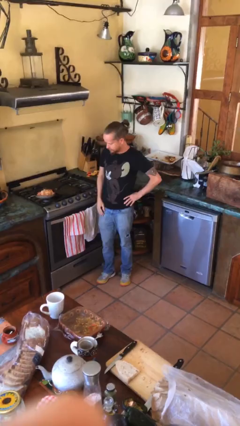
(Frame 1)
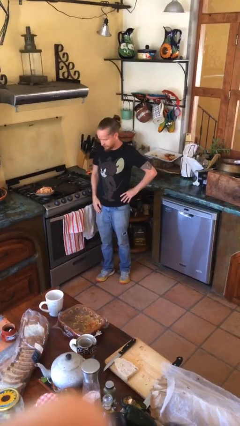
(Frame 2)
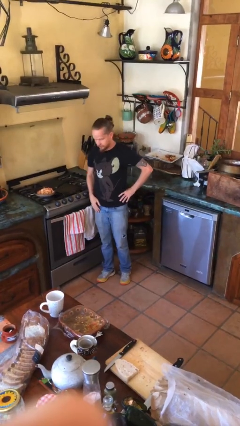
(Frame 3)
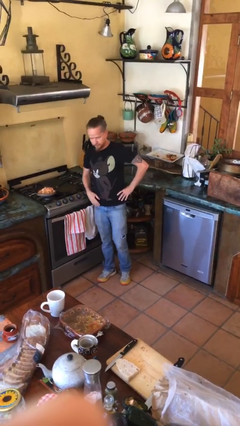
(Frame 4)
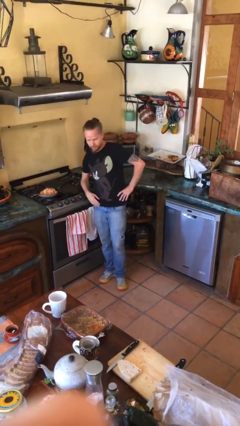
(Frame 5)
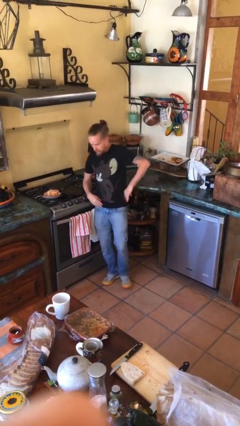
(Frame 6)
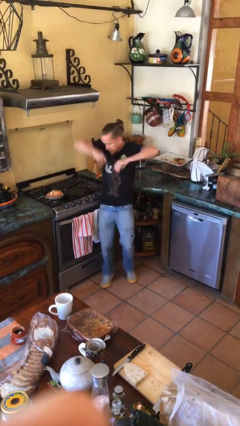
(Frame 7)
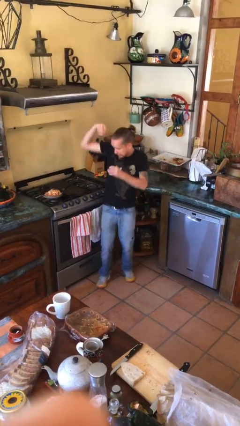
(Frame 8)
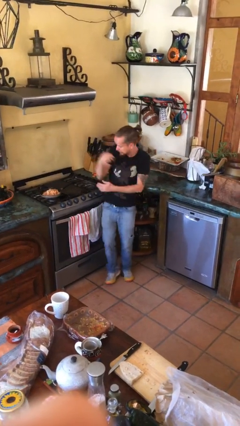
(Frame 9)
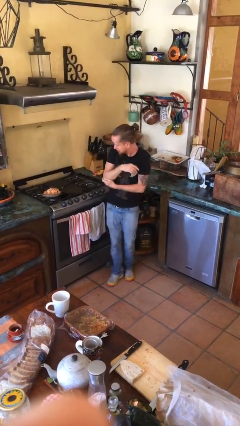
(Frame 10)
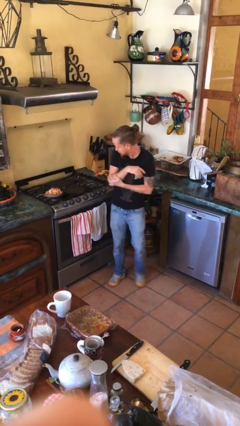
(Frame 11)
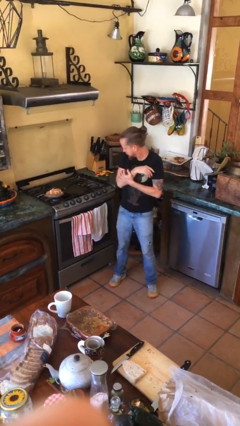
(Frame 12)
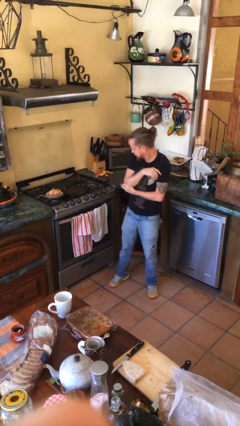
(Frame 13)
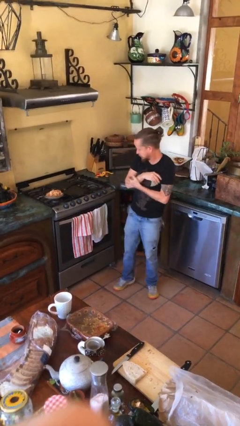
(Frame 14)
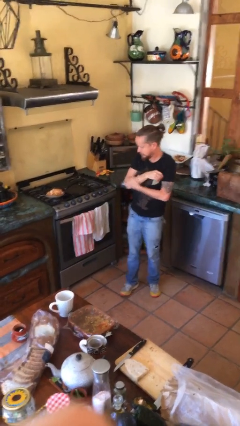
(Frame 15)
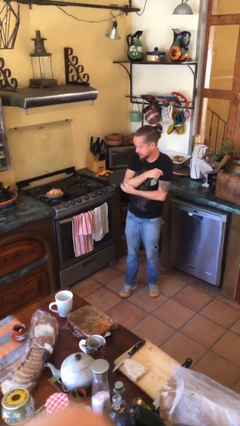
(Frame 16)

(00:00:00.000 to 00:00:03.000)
person burns hand

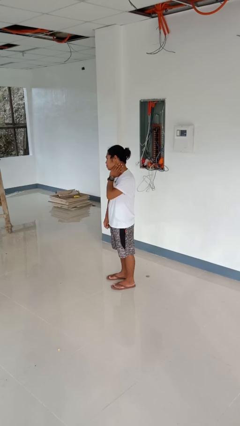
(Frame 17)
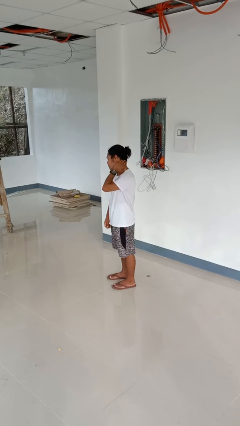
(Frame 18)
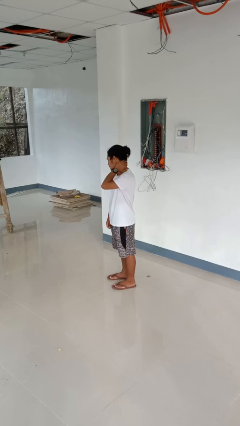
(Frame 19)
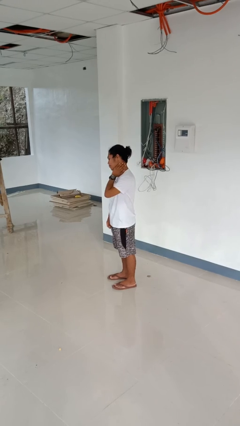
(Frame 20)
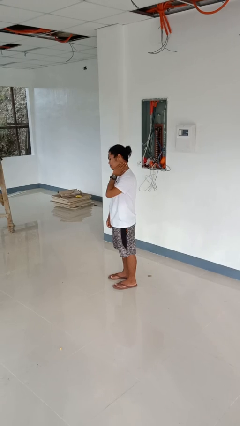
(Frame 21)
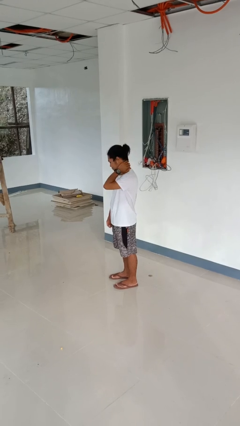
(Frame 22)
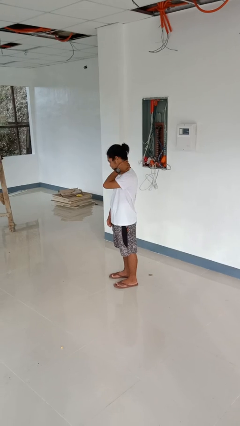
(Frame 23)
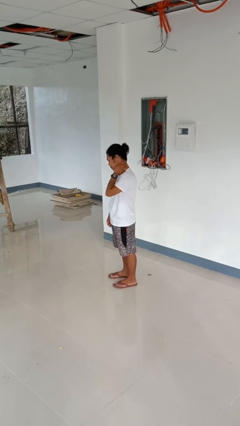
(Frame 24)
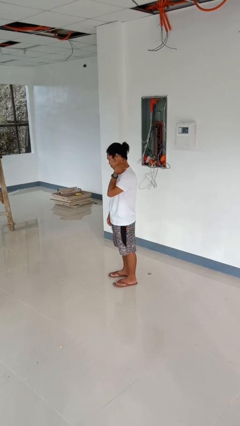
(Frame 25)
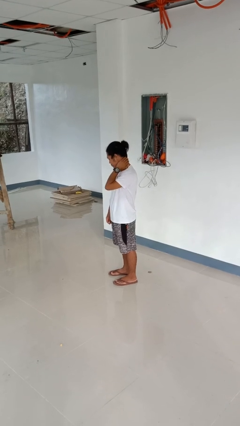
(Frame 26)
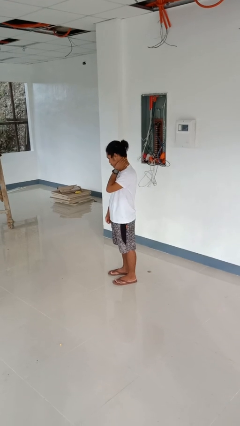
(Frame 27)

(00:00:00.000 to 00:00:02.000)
person rubs neck

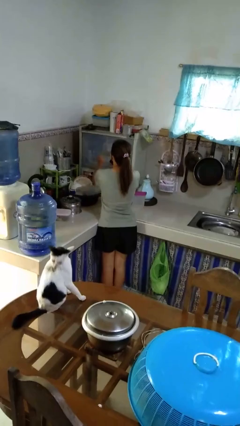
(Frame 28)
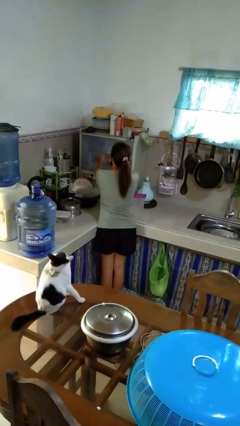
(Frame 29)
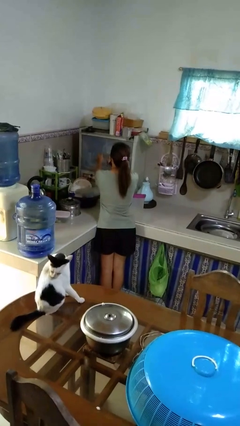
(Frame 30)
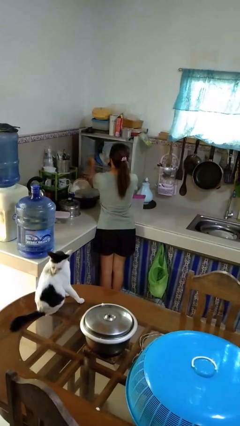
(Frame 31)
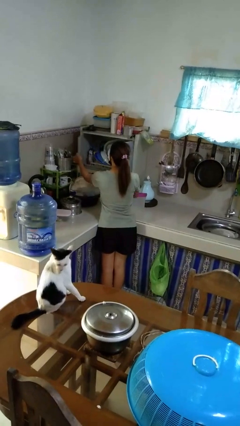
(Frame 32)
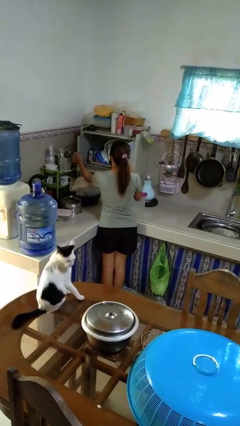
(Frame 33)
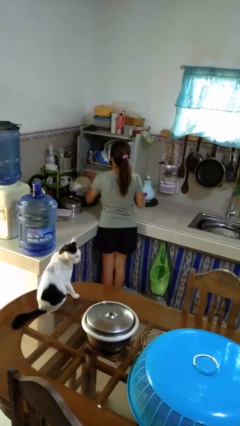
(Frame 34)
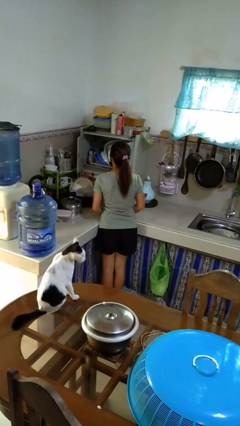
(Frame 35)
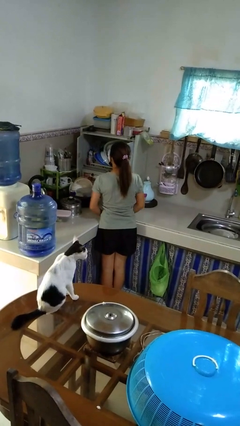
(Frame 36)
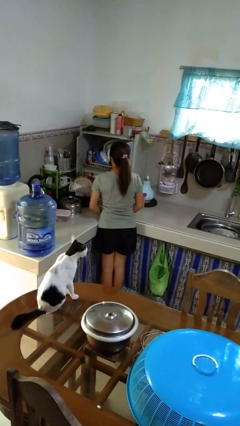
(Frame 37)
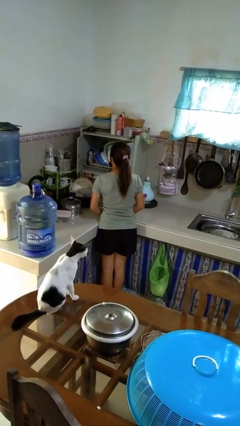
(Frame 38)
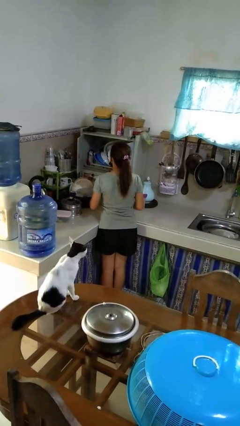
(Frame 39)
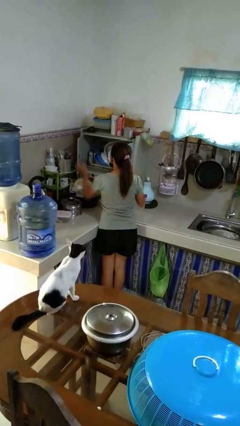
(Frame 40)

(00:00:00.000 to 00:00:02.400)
person opens kitchen drawer

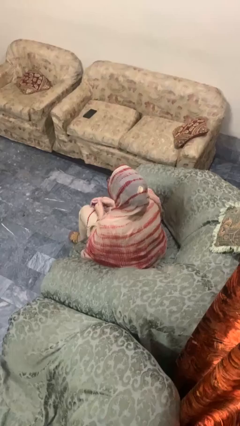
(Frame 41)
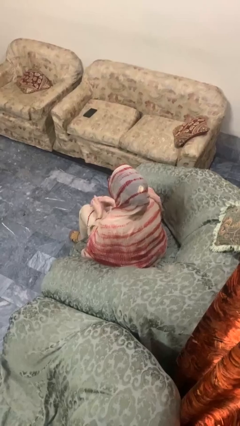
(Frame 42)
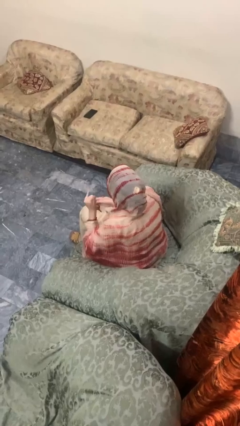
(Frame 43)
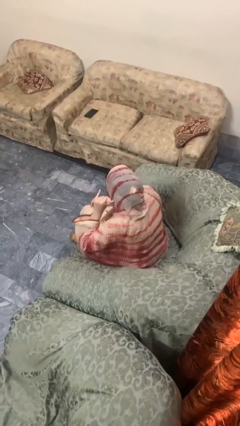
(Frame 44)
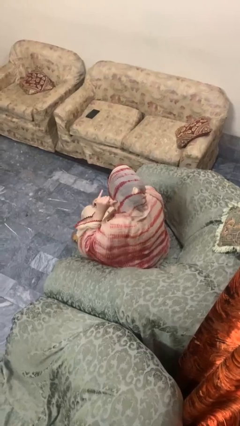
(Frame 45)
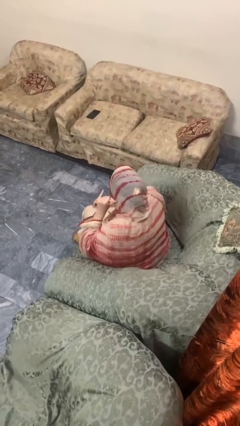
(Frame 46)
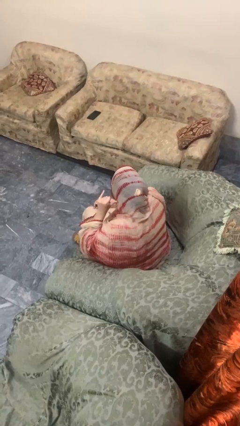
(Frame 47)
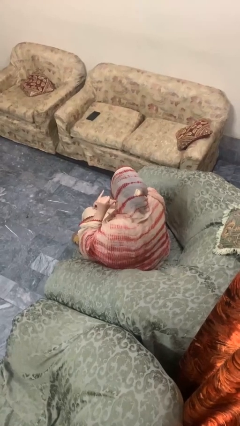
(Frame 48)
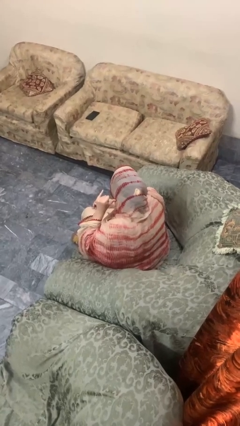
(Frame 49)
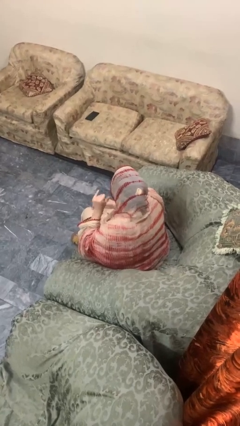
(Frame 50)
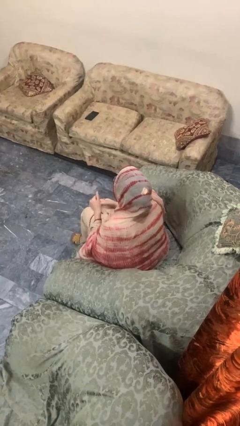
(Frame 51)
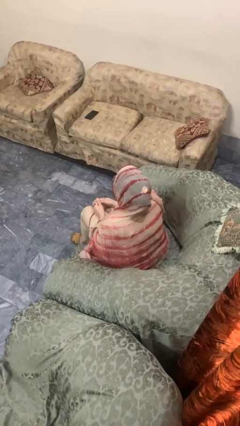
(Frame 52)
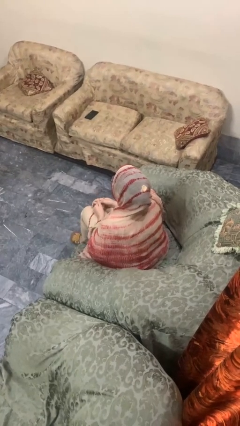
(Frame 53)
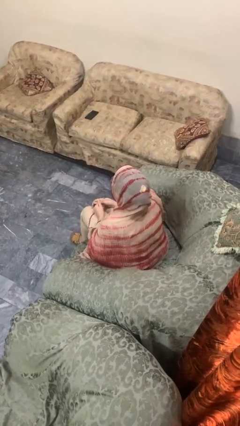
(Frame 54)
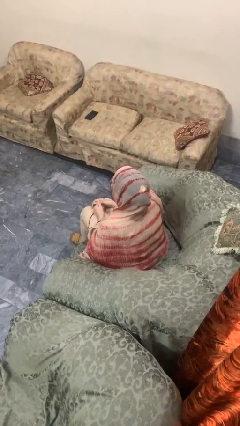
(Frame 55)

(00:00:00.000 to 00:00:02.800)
person gestures call me

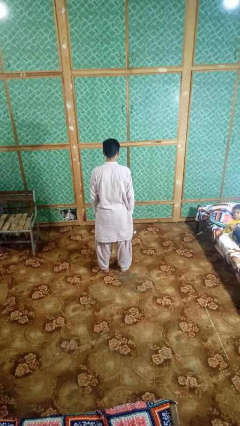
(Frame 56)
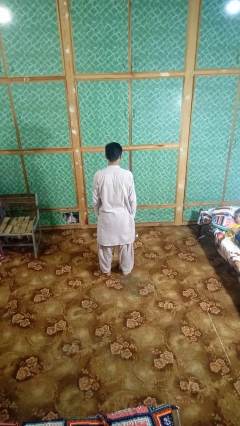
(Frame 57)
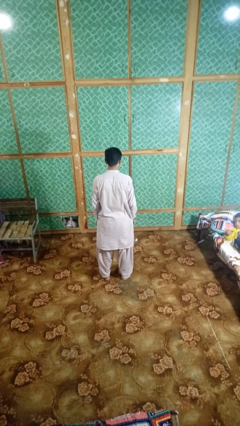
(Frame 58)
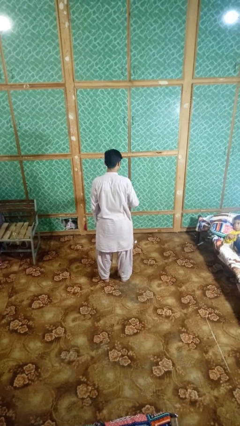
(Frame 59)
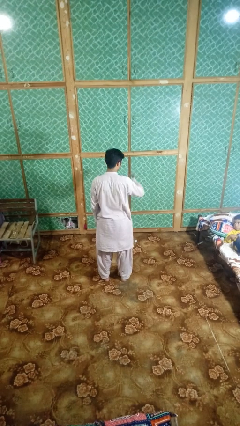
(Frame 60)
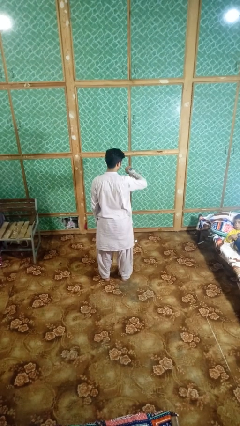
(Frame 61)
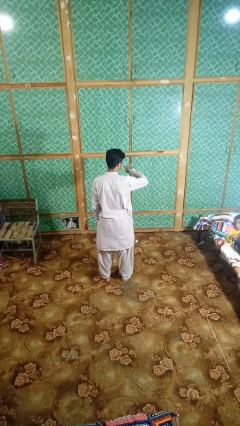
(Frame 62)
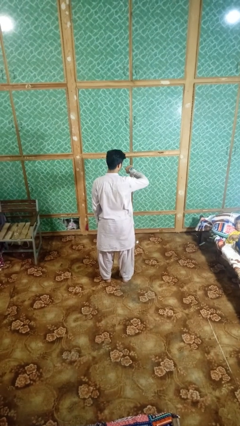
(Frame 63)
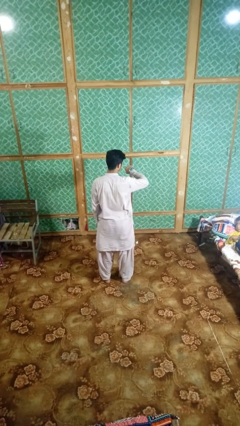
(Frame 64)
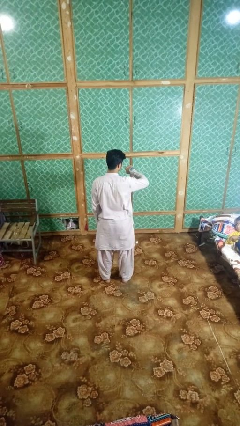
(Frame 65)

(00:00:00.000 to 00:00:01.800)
person looks at wristwatch

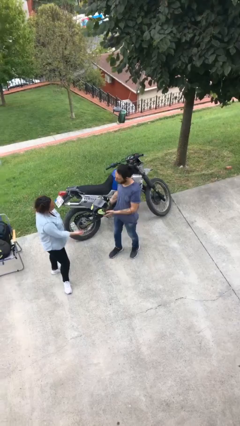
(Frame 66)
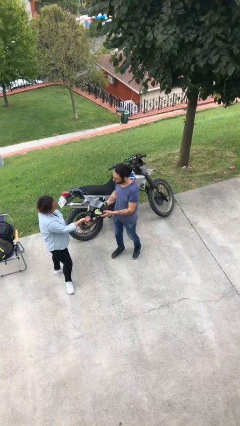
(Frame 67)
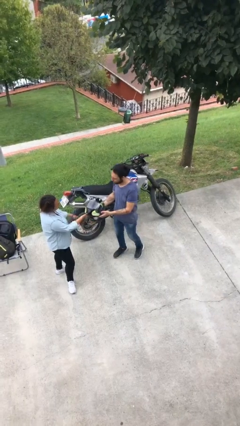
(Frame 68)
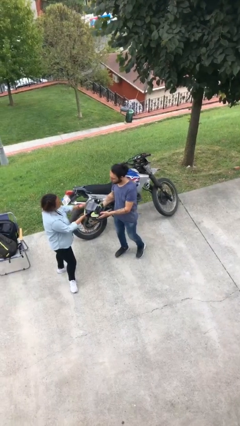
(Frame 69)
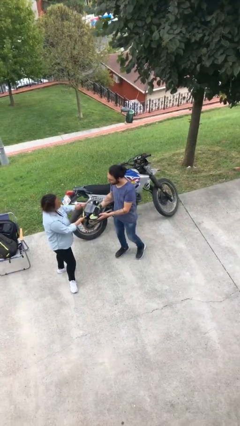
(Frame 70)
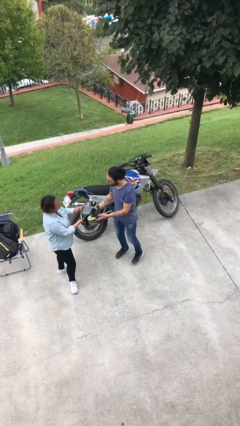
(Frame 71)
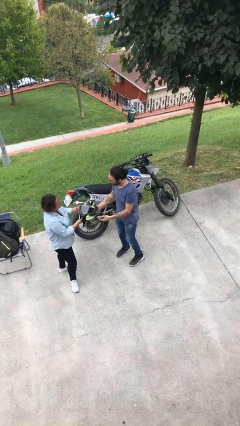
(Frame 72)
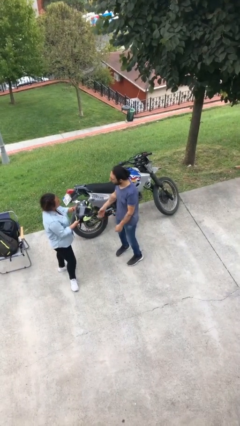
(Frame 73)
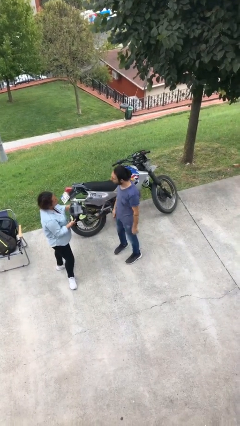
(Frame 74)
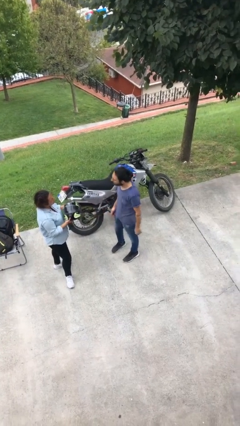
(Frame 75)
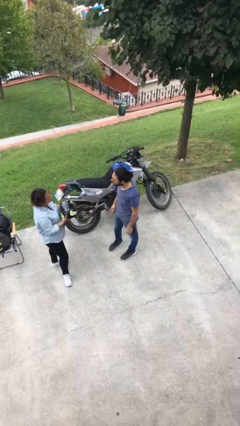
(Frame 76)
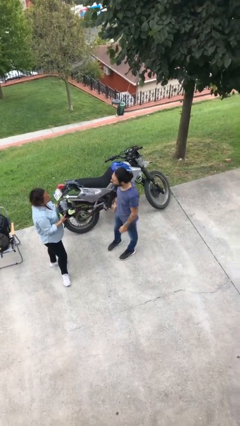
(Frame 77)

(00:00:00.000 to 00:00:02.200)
person transfers object to person

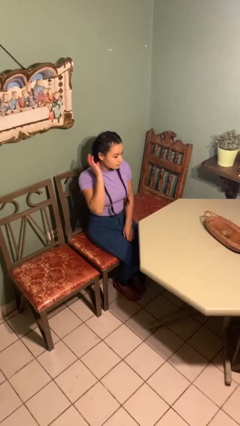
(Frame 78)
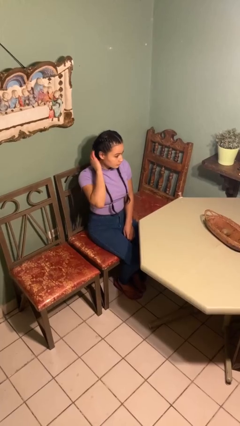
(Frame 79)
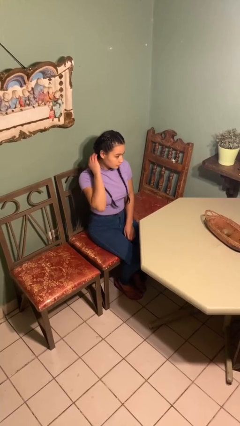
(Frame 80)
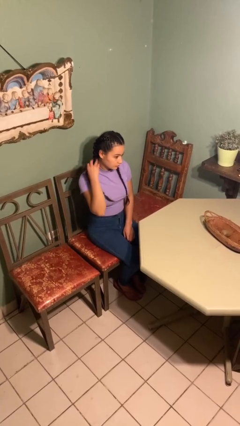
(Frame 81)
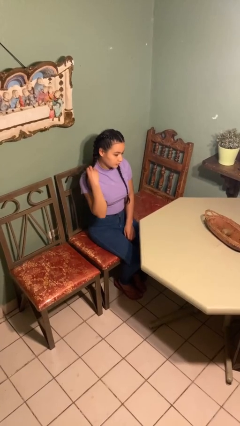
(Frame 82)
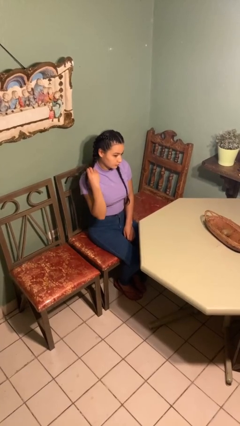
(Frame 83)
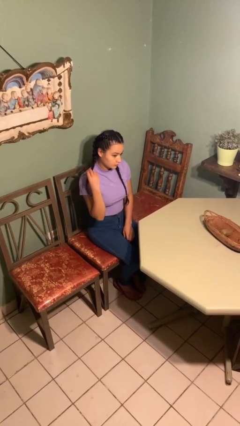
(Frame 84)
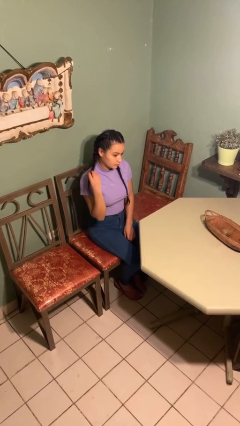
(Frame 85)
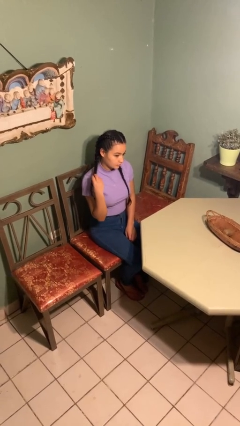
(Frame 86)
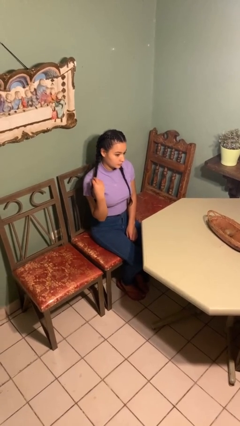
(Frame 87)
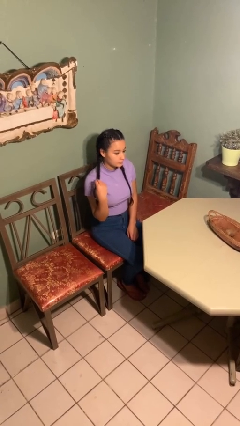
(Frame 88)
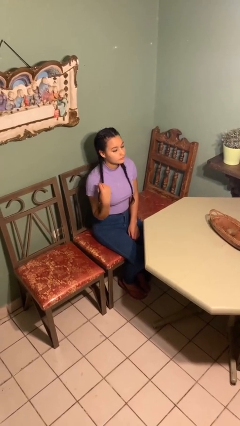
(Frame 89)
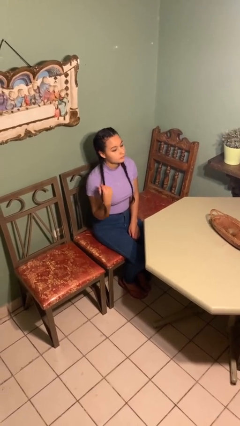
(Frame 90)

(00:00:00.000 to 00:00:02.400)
person strokes hair

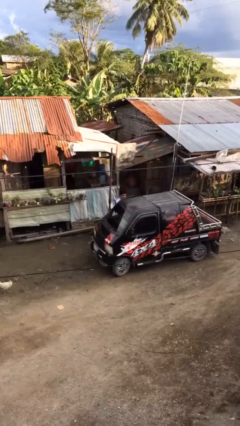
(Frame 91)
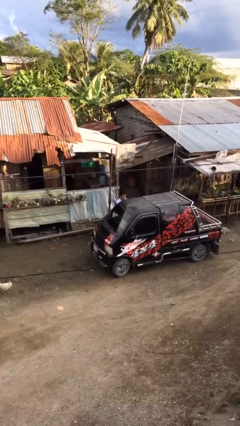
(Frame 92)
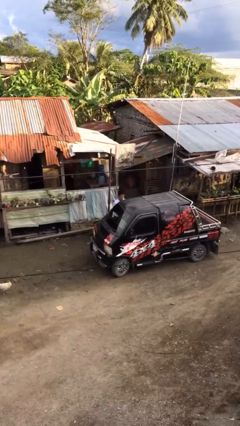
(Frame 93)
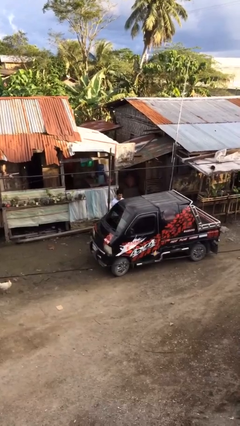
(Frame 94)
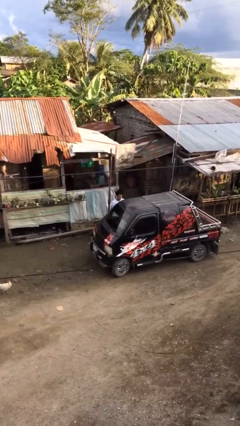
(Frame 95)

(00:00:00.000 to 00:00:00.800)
person closes car door
